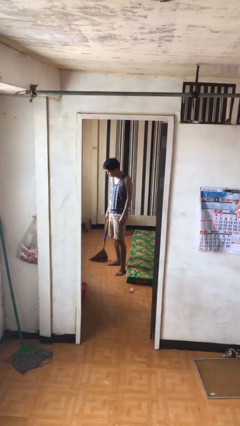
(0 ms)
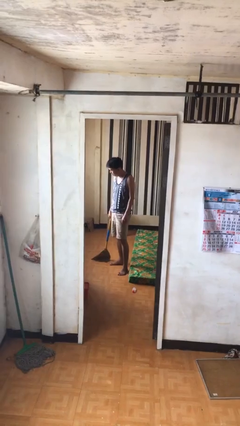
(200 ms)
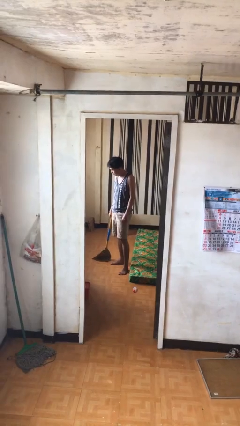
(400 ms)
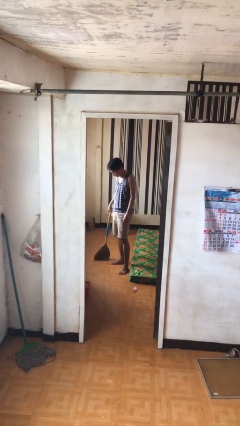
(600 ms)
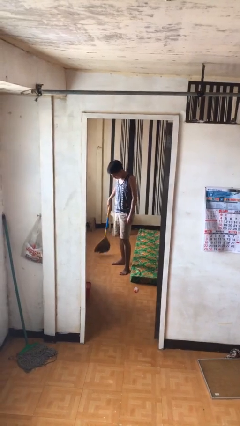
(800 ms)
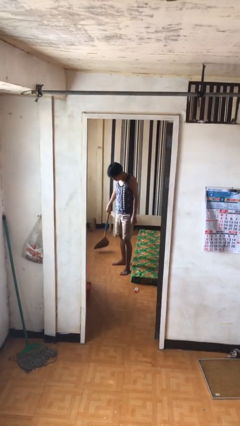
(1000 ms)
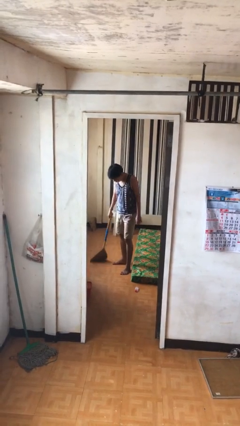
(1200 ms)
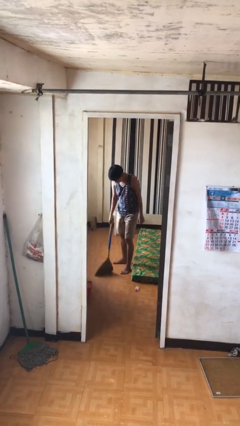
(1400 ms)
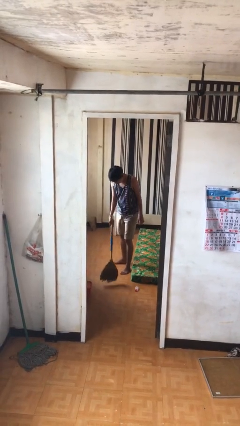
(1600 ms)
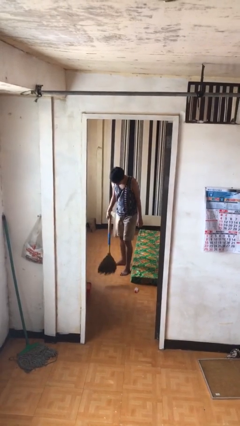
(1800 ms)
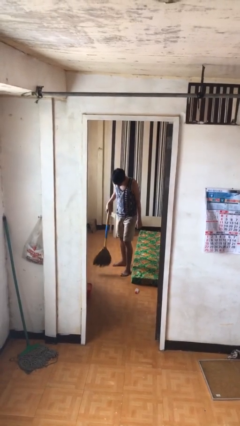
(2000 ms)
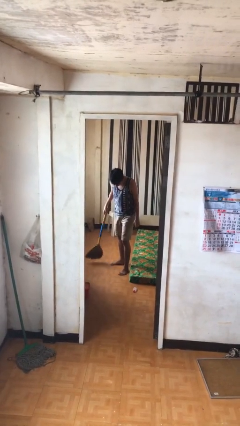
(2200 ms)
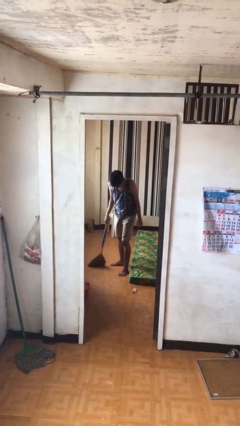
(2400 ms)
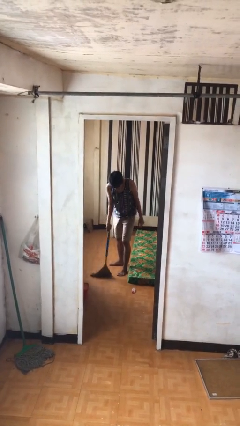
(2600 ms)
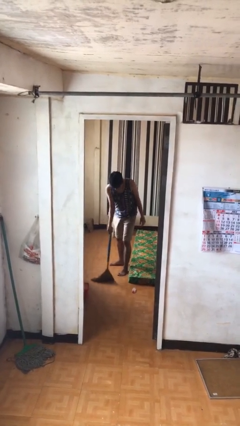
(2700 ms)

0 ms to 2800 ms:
person sweeps floor

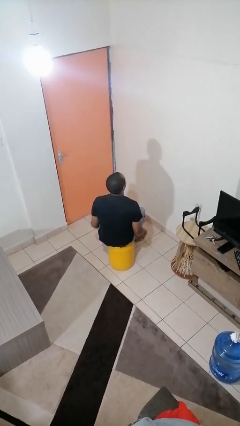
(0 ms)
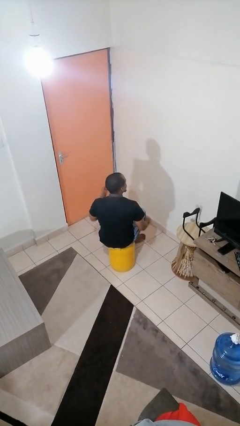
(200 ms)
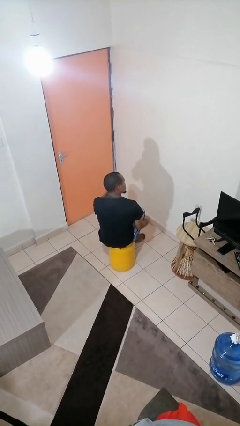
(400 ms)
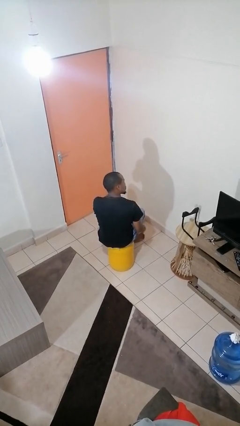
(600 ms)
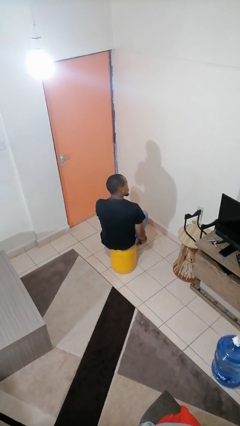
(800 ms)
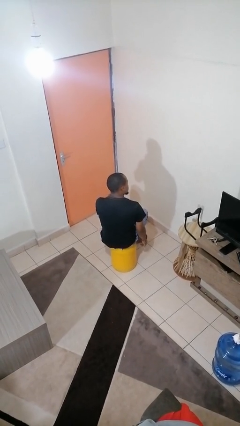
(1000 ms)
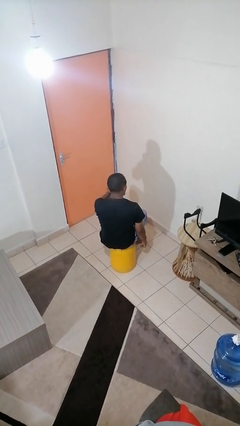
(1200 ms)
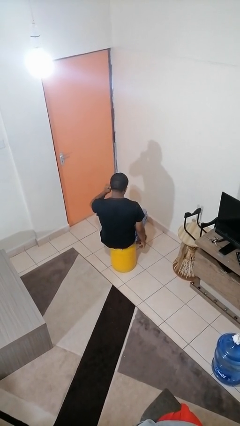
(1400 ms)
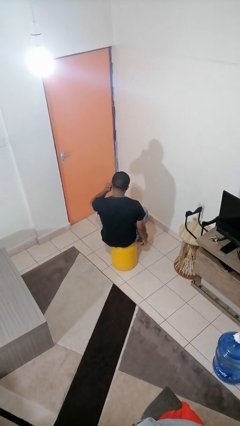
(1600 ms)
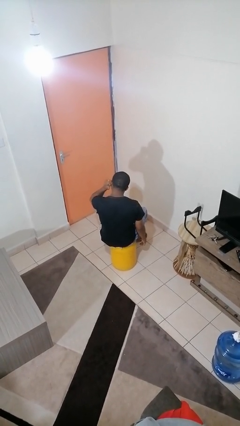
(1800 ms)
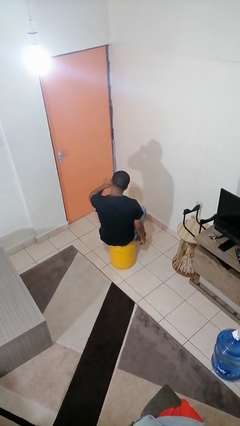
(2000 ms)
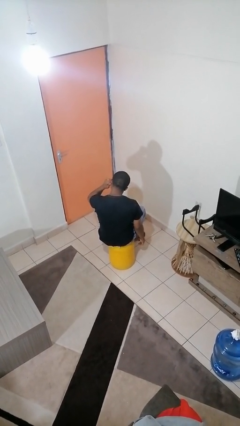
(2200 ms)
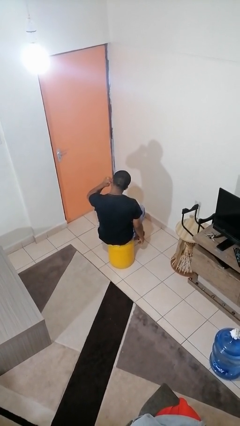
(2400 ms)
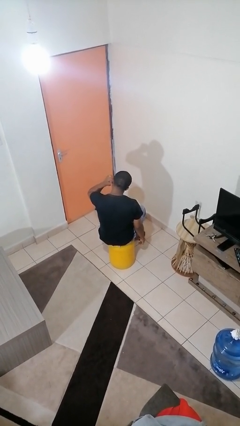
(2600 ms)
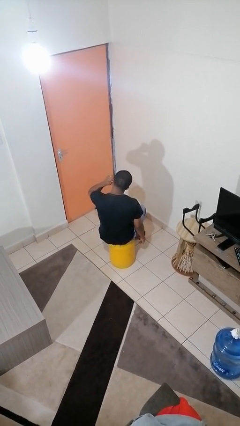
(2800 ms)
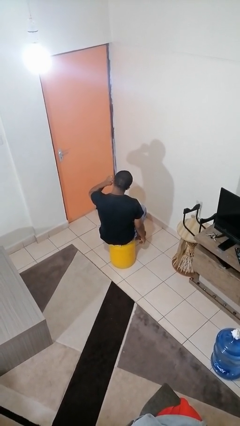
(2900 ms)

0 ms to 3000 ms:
person touches earlobe

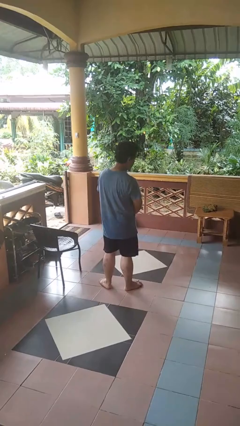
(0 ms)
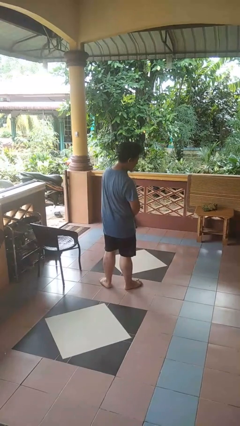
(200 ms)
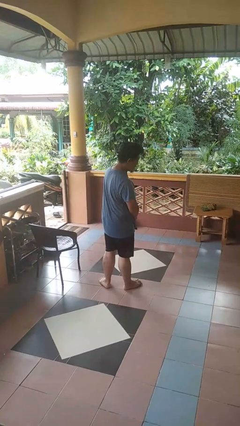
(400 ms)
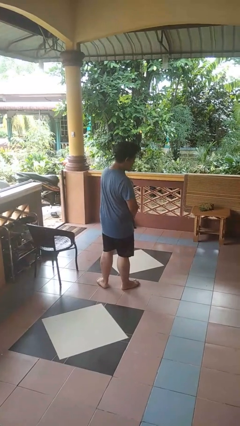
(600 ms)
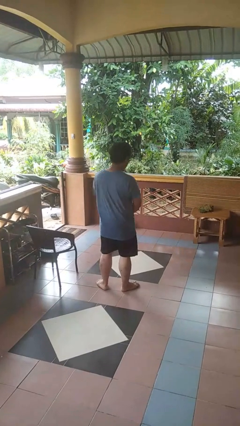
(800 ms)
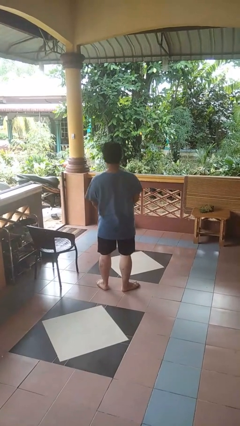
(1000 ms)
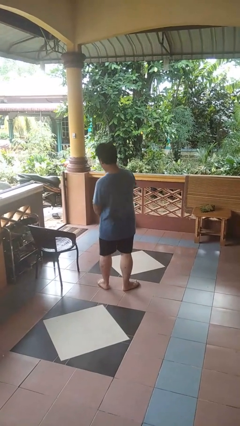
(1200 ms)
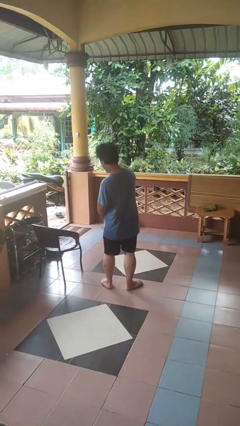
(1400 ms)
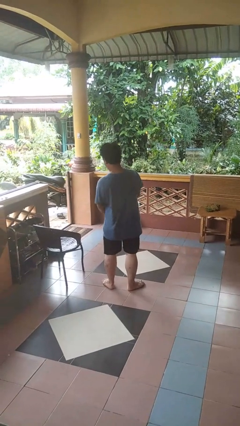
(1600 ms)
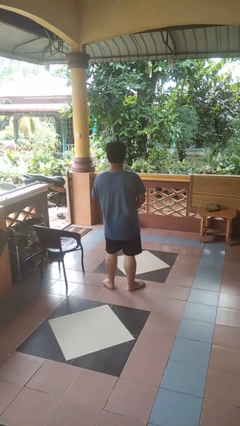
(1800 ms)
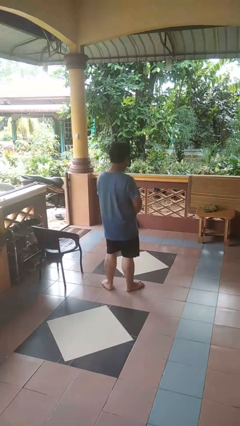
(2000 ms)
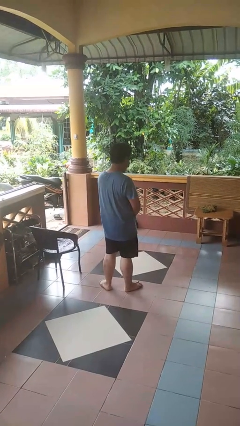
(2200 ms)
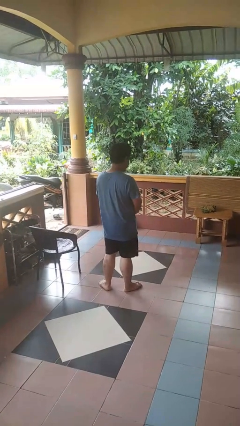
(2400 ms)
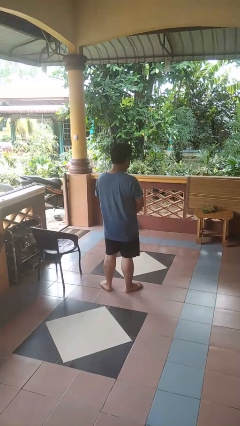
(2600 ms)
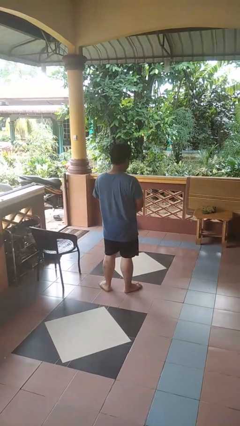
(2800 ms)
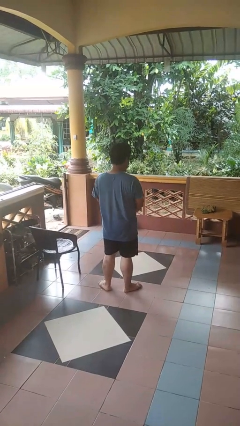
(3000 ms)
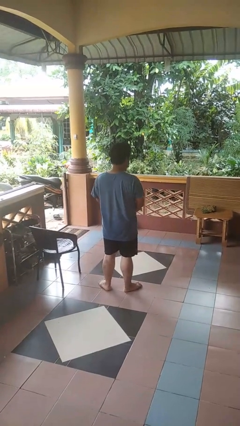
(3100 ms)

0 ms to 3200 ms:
person twirls

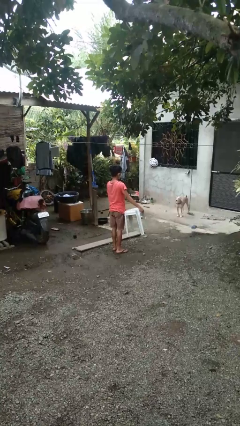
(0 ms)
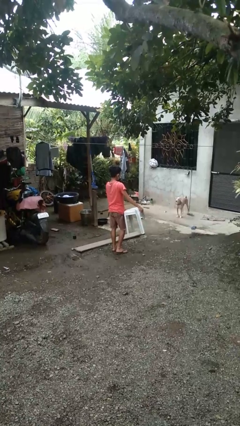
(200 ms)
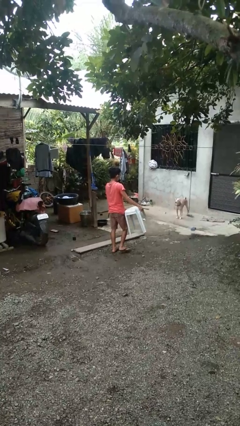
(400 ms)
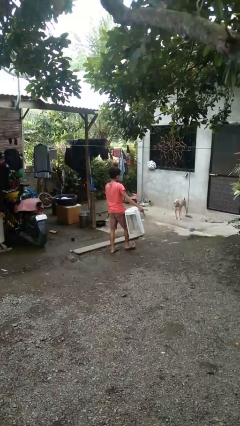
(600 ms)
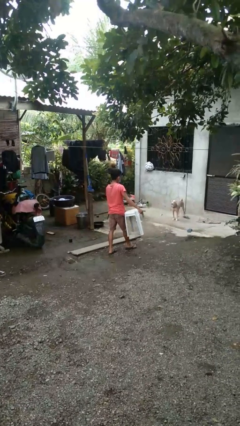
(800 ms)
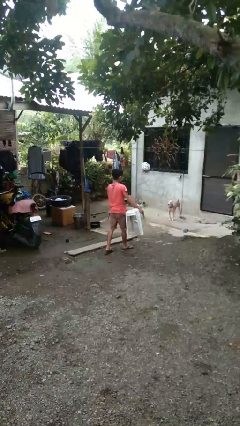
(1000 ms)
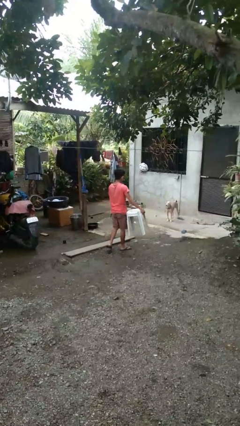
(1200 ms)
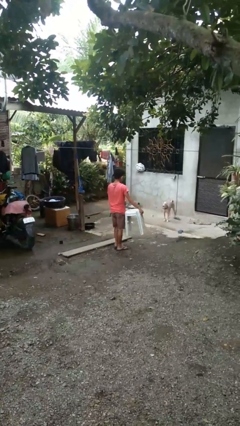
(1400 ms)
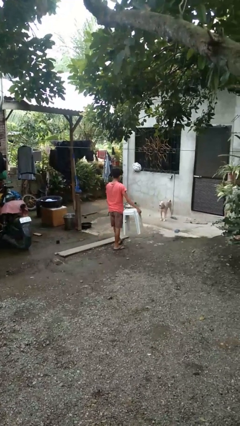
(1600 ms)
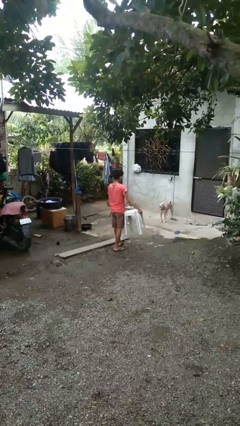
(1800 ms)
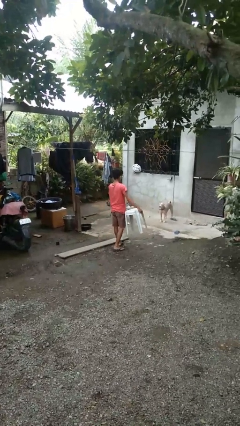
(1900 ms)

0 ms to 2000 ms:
person carries furniture

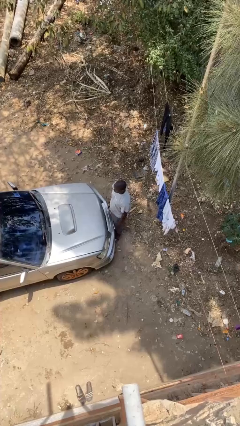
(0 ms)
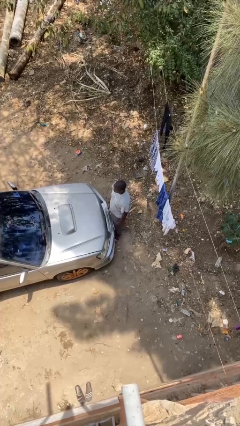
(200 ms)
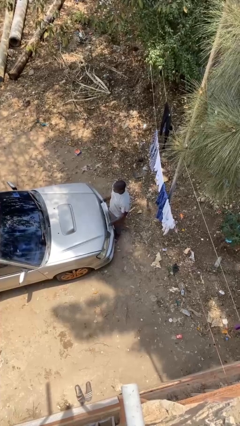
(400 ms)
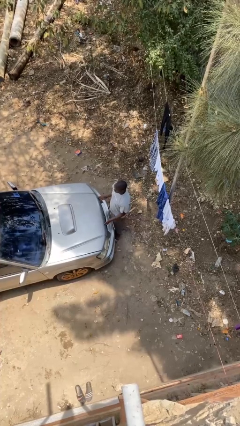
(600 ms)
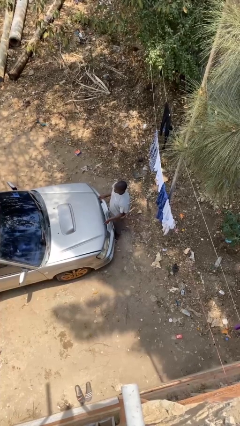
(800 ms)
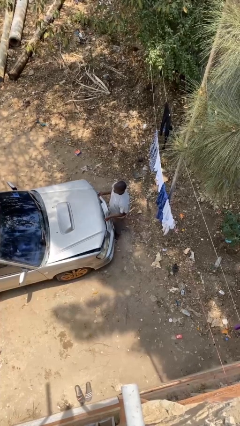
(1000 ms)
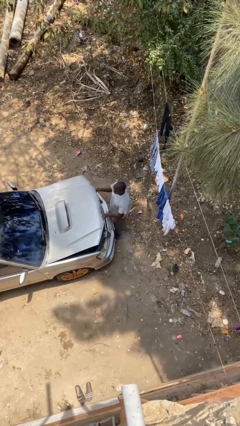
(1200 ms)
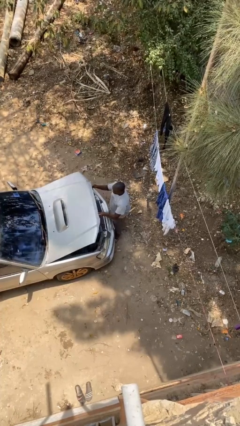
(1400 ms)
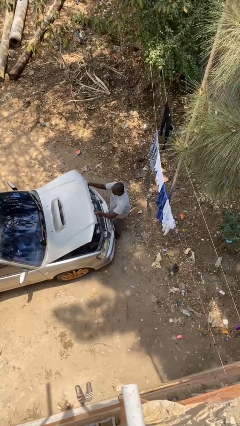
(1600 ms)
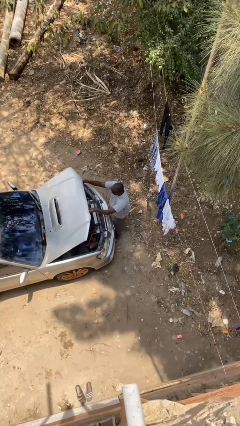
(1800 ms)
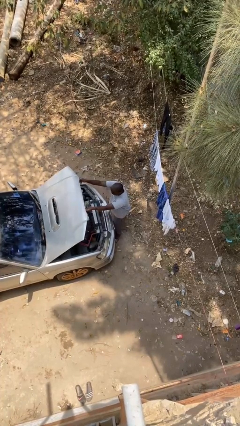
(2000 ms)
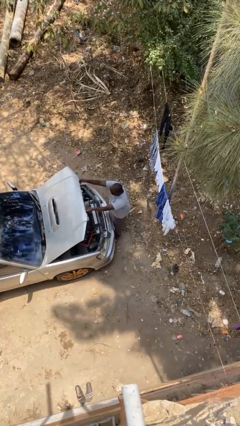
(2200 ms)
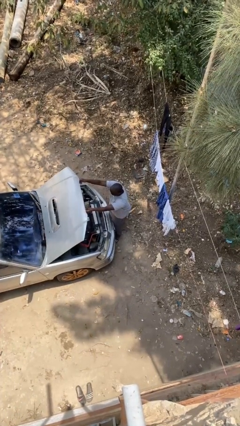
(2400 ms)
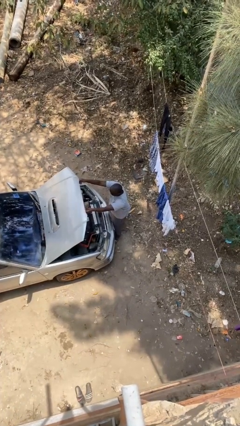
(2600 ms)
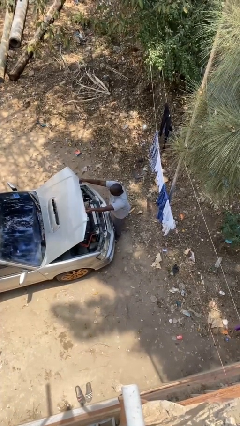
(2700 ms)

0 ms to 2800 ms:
person opens car hood

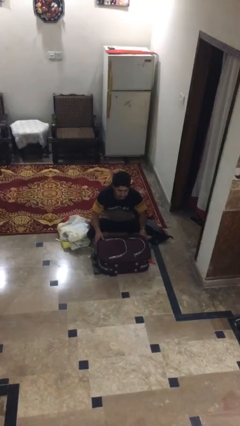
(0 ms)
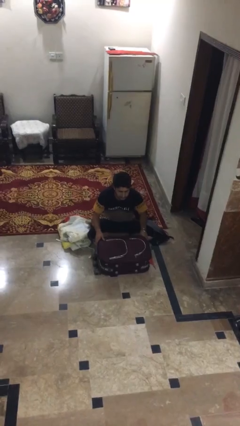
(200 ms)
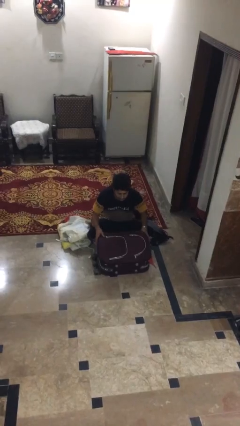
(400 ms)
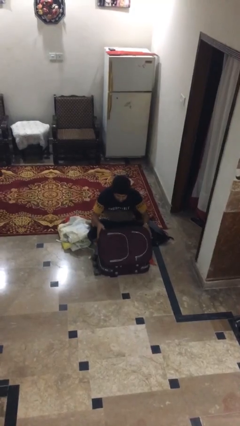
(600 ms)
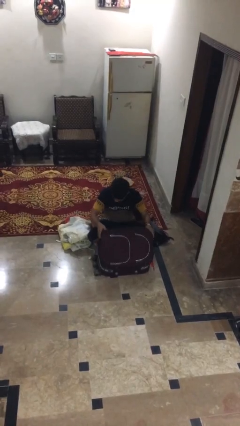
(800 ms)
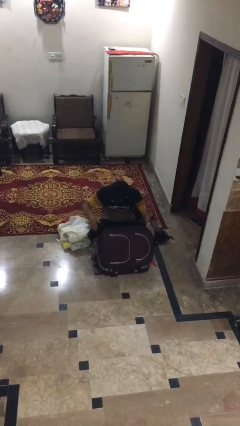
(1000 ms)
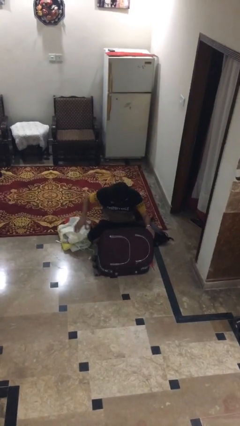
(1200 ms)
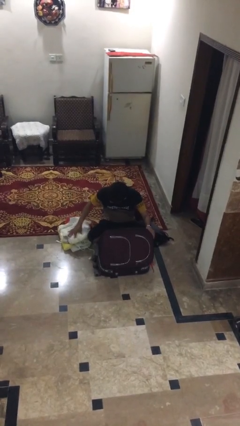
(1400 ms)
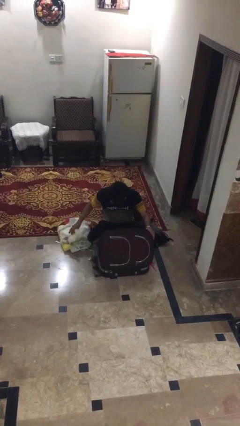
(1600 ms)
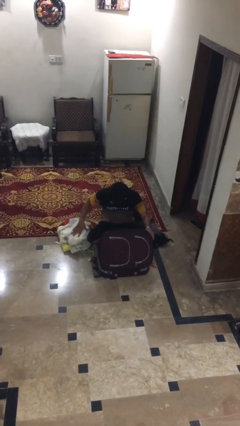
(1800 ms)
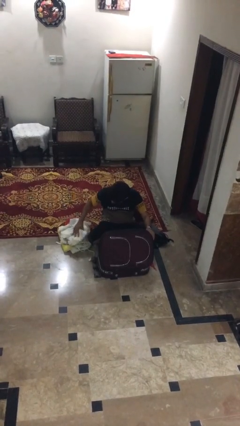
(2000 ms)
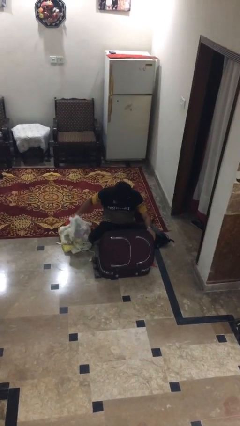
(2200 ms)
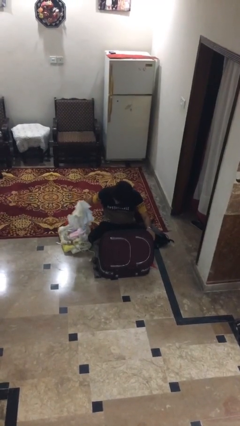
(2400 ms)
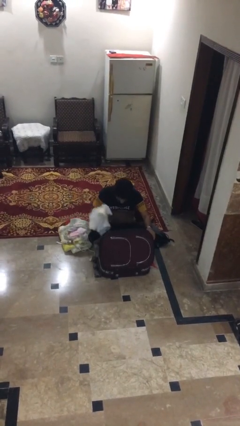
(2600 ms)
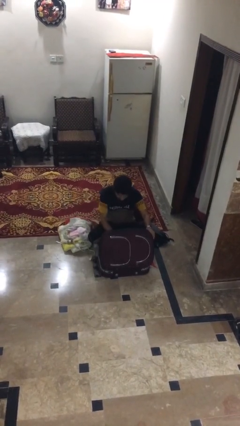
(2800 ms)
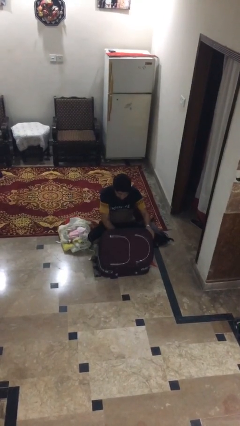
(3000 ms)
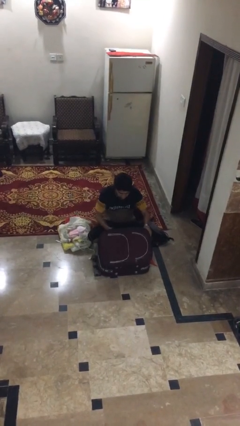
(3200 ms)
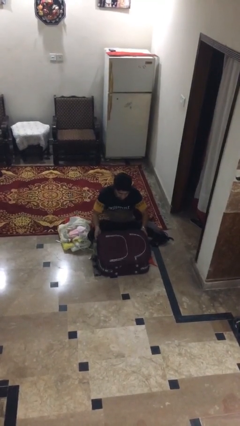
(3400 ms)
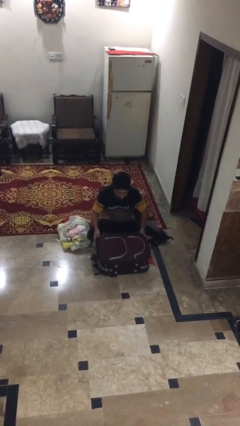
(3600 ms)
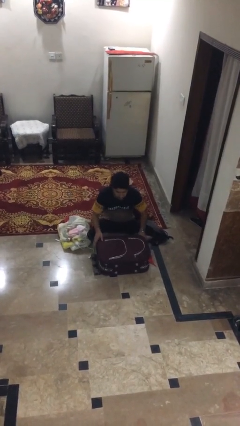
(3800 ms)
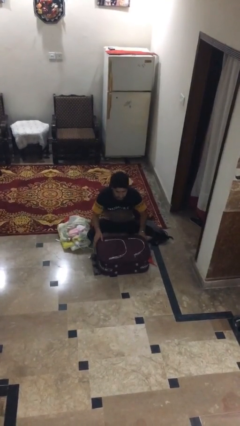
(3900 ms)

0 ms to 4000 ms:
person loads clothes into suitcase
